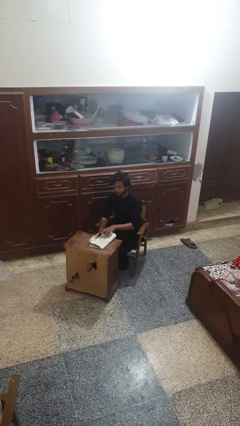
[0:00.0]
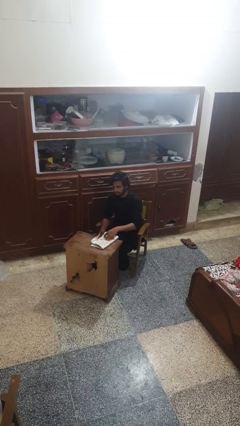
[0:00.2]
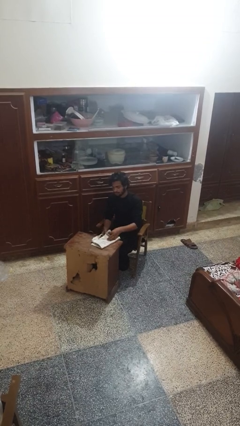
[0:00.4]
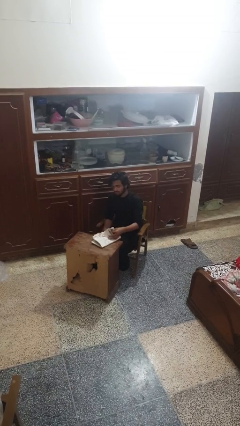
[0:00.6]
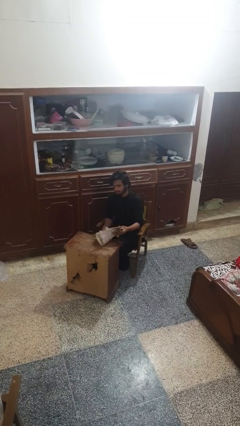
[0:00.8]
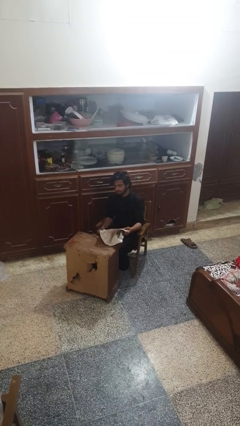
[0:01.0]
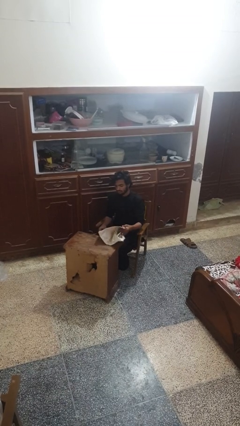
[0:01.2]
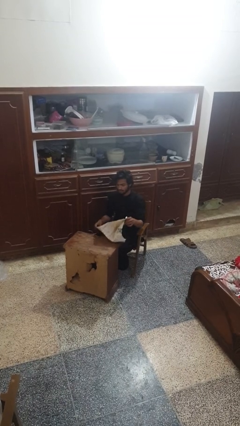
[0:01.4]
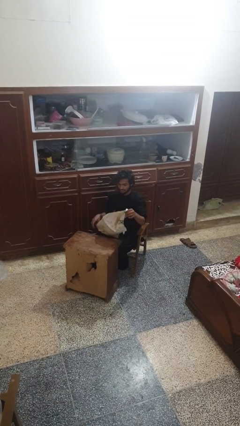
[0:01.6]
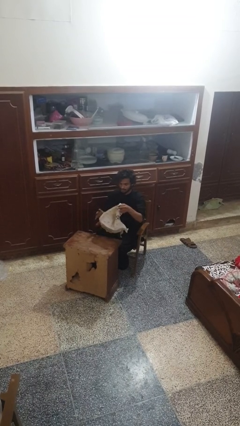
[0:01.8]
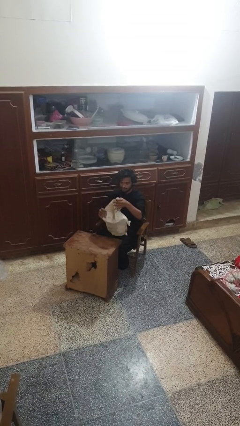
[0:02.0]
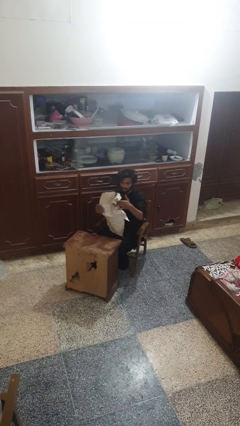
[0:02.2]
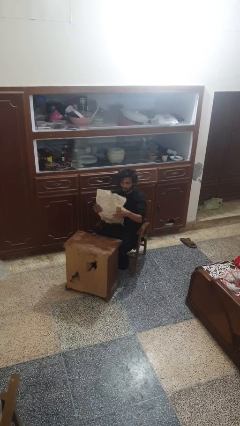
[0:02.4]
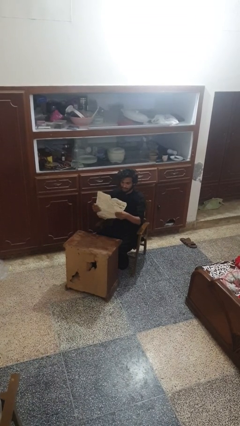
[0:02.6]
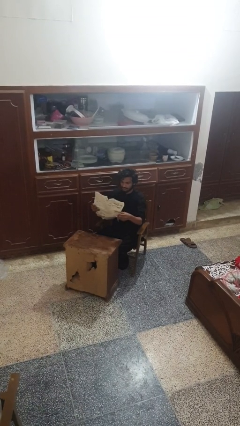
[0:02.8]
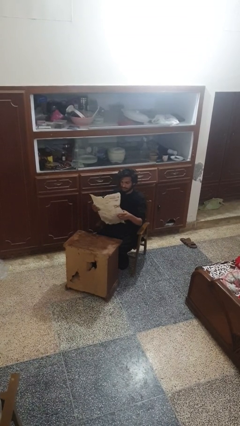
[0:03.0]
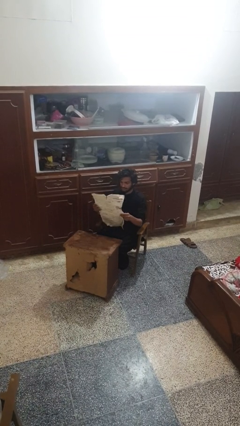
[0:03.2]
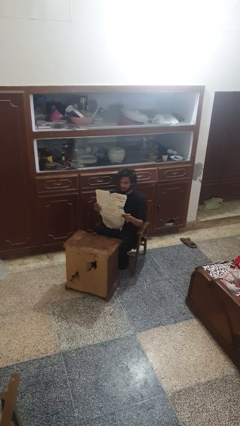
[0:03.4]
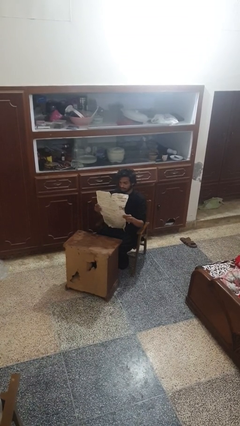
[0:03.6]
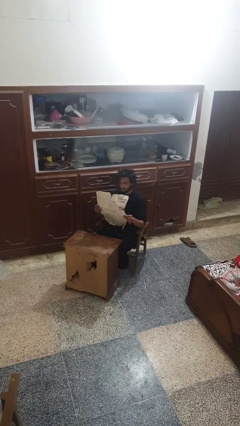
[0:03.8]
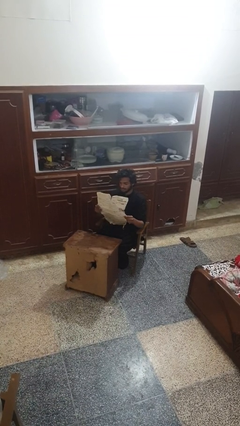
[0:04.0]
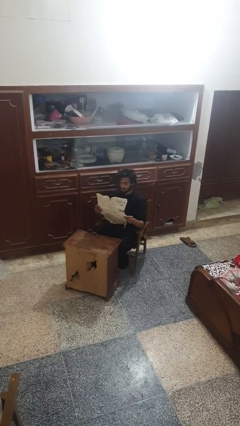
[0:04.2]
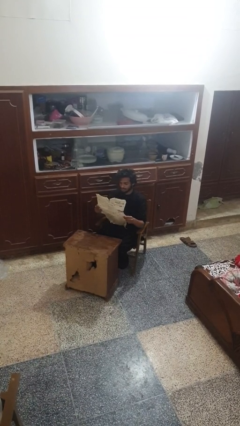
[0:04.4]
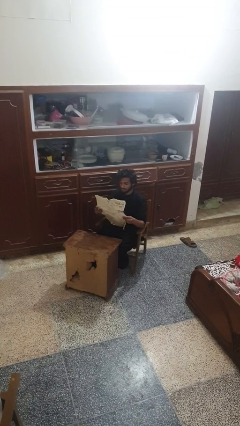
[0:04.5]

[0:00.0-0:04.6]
person reads newspaper

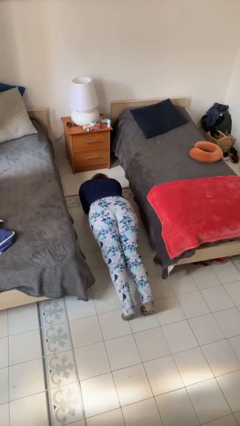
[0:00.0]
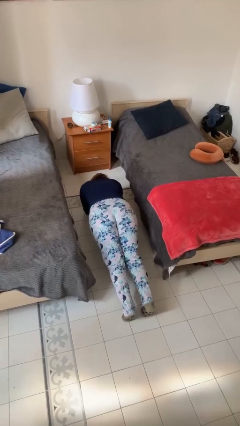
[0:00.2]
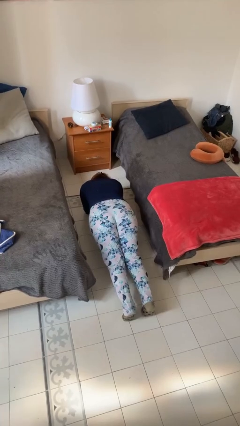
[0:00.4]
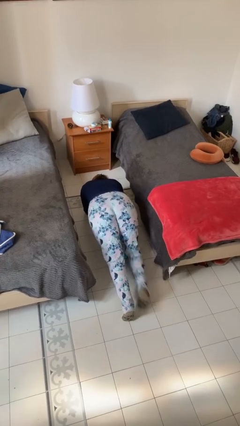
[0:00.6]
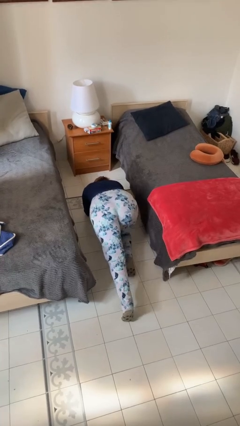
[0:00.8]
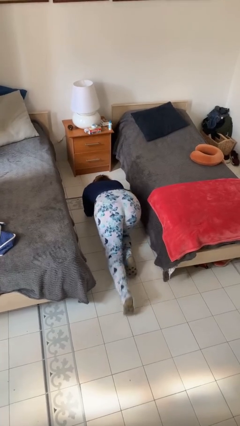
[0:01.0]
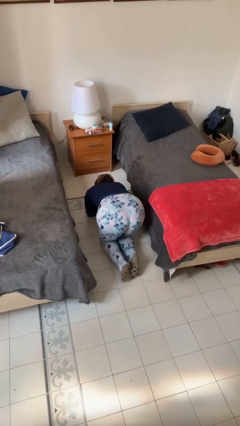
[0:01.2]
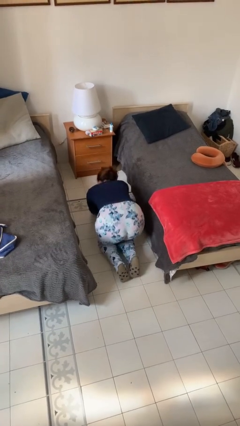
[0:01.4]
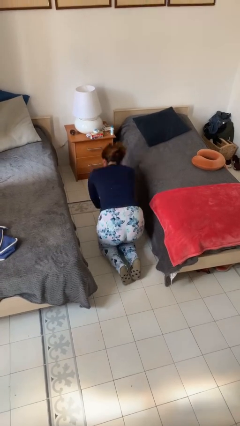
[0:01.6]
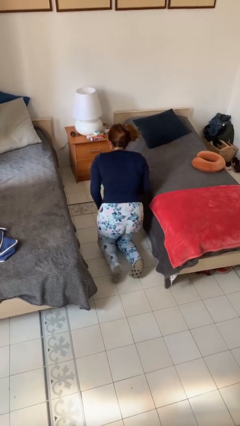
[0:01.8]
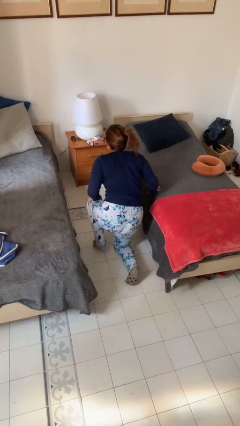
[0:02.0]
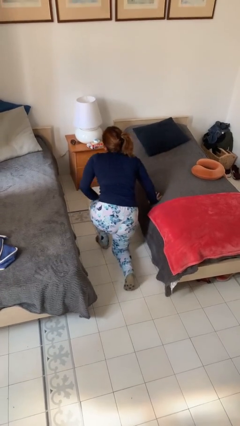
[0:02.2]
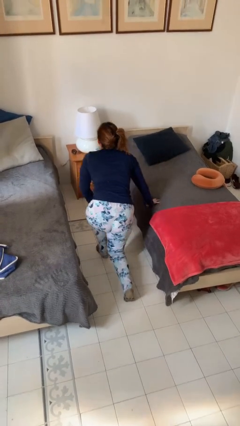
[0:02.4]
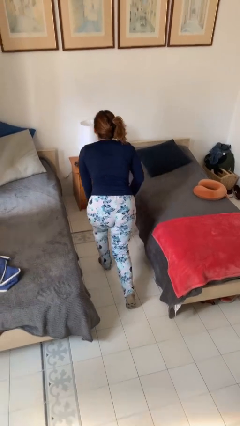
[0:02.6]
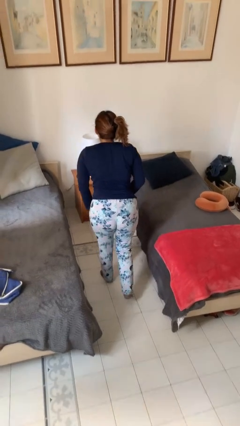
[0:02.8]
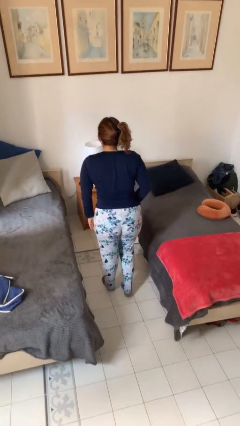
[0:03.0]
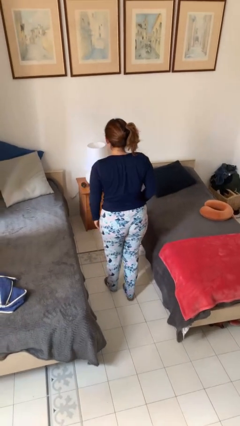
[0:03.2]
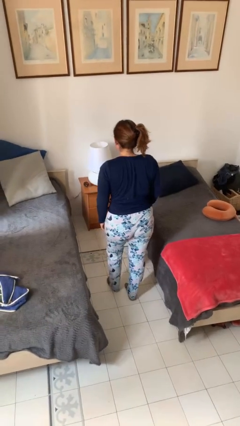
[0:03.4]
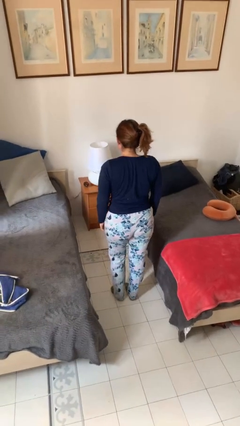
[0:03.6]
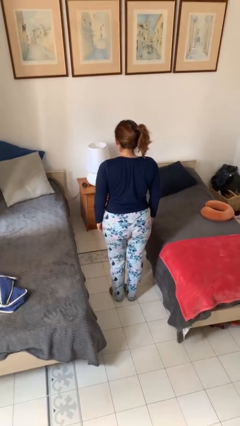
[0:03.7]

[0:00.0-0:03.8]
person stands up from floor

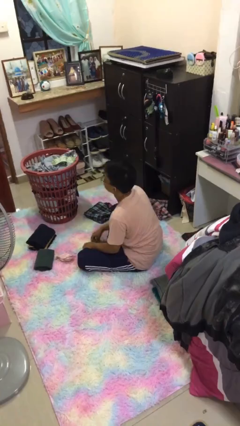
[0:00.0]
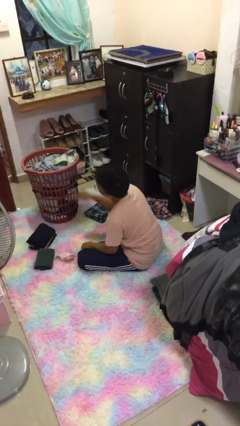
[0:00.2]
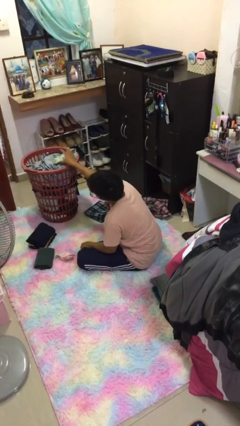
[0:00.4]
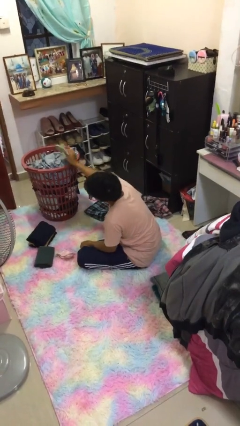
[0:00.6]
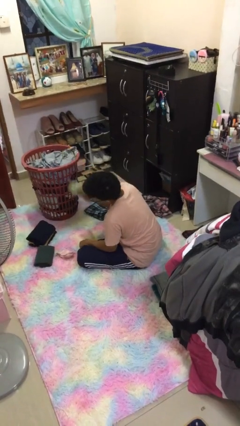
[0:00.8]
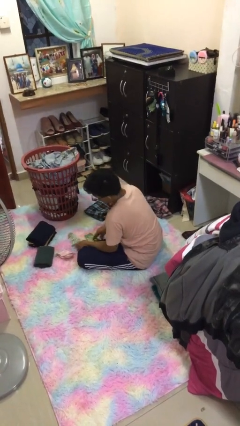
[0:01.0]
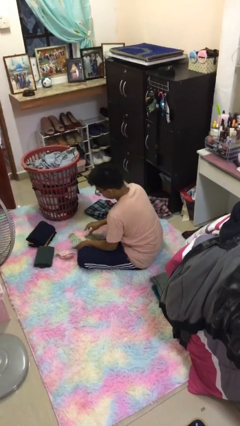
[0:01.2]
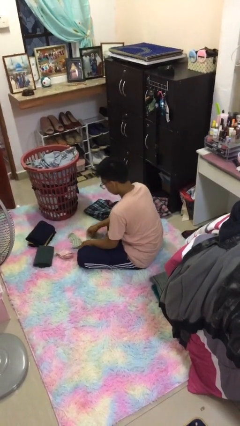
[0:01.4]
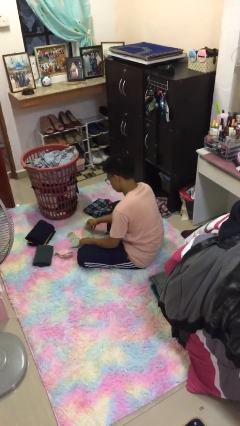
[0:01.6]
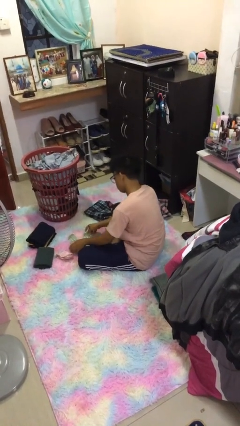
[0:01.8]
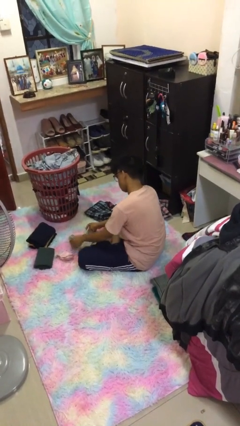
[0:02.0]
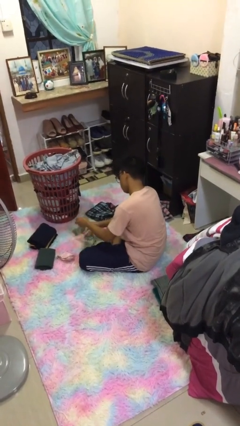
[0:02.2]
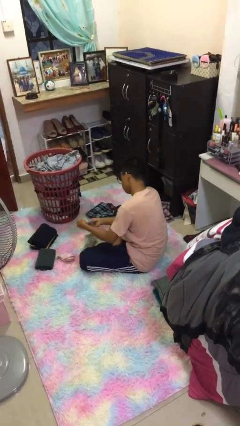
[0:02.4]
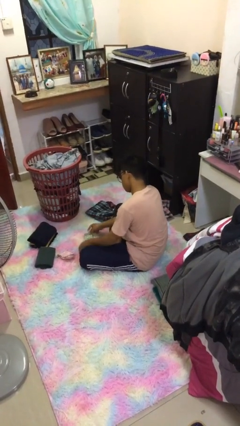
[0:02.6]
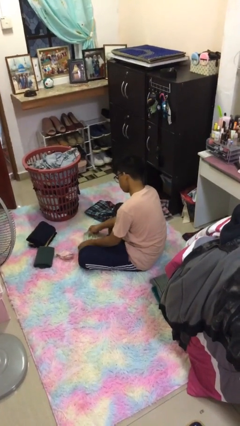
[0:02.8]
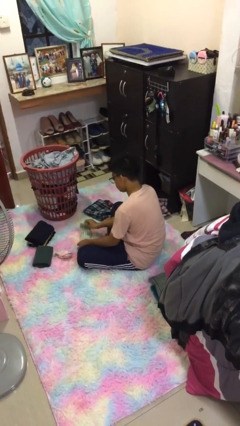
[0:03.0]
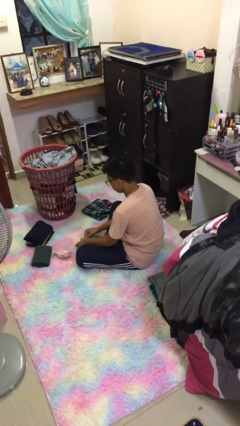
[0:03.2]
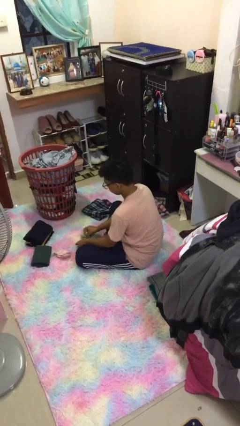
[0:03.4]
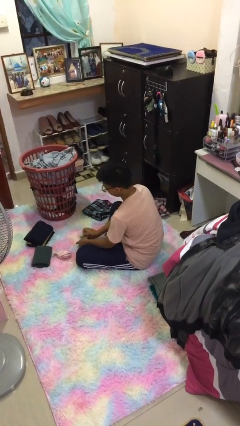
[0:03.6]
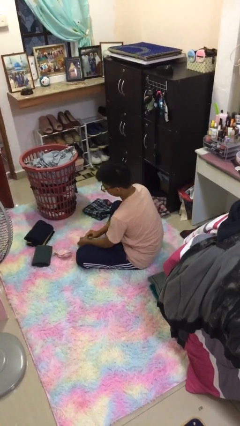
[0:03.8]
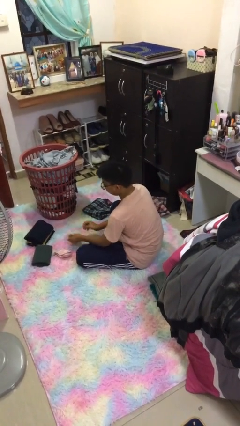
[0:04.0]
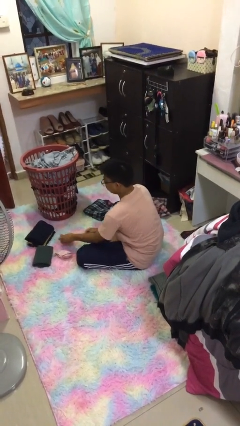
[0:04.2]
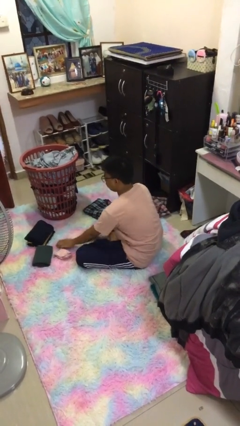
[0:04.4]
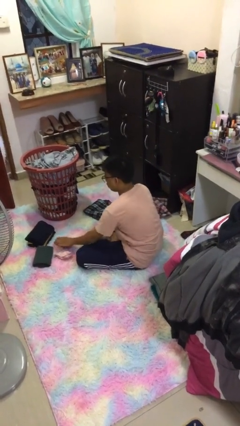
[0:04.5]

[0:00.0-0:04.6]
person folds socks

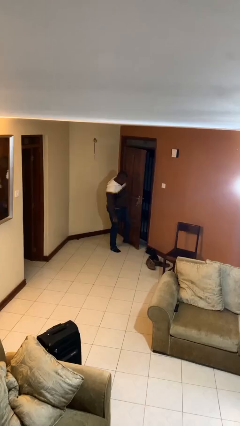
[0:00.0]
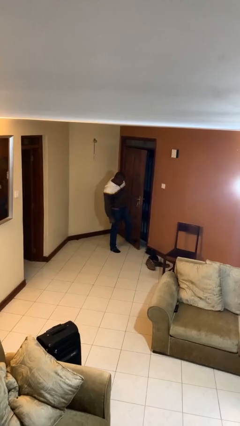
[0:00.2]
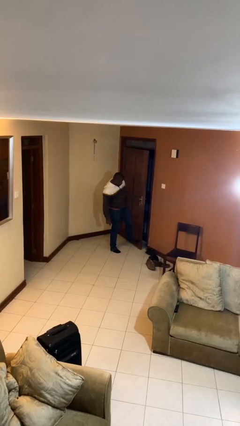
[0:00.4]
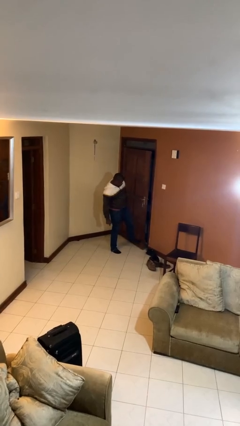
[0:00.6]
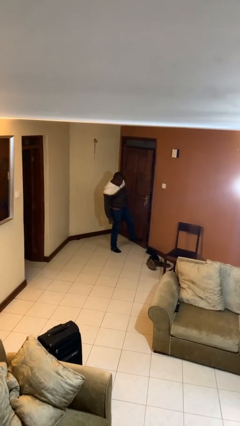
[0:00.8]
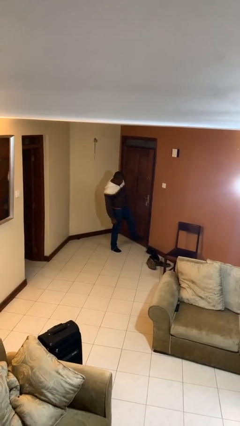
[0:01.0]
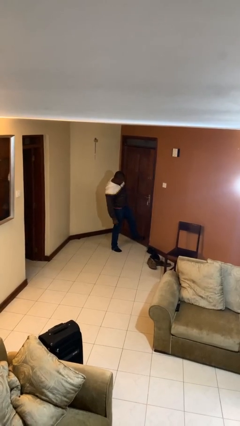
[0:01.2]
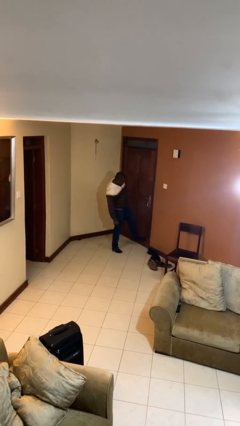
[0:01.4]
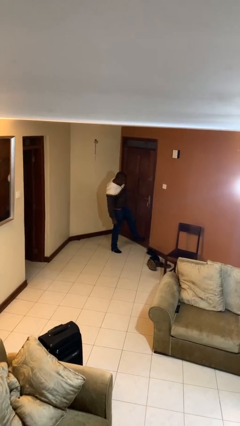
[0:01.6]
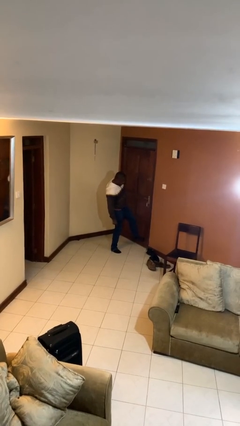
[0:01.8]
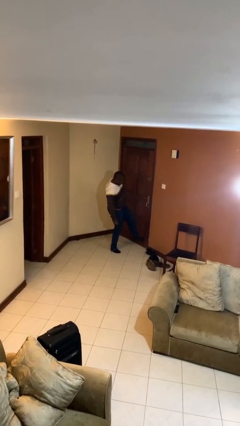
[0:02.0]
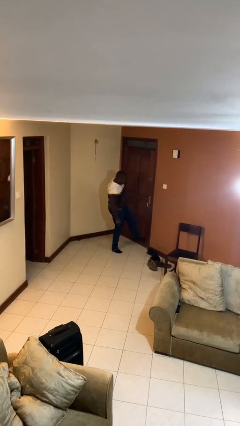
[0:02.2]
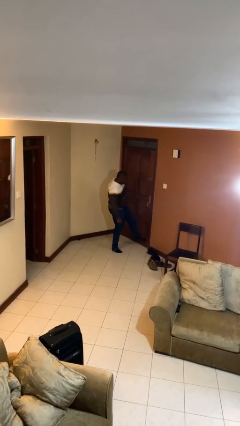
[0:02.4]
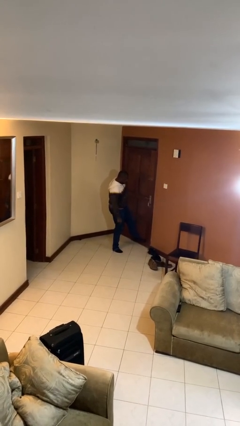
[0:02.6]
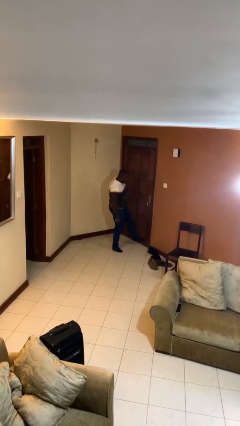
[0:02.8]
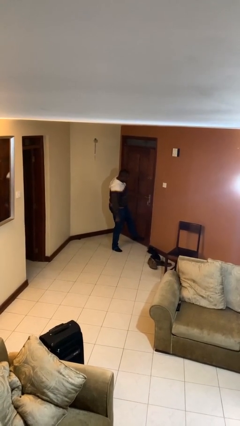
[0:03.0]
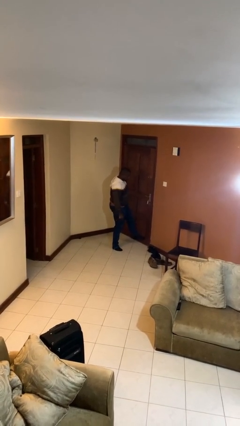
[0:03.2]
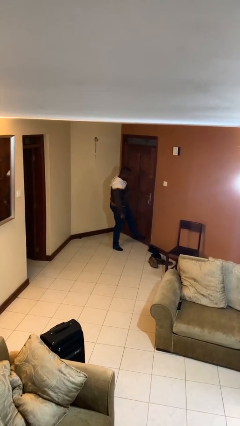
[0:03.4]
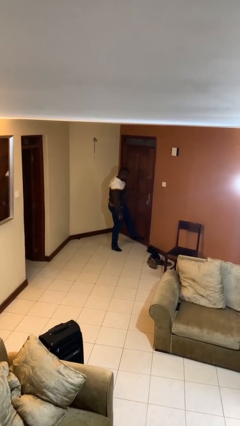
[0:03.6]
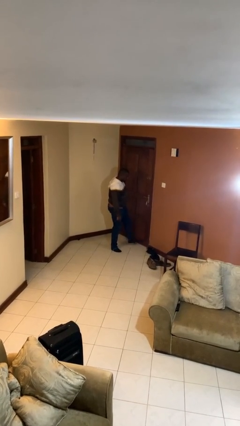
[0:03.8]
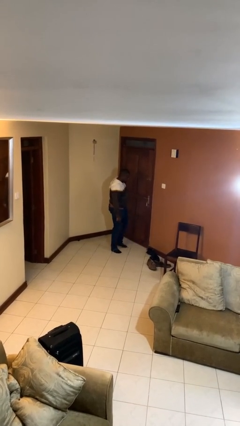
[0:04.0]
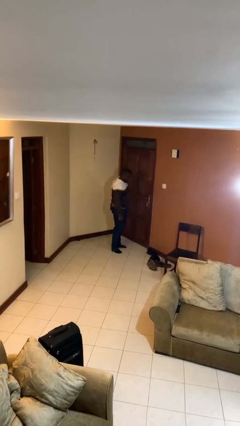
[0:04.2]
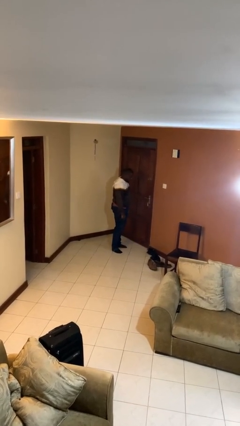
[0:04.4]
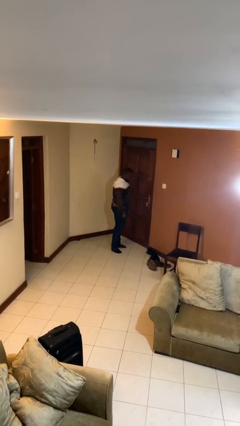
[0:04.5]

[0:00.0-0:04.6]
person closes door with foot
